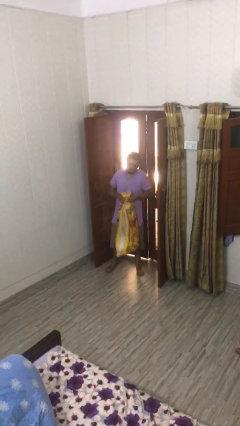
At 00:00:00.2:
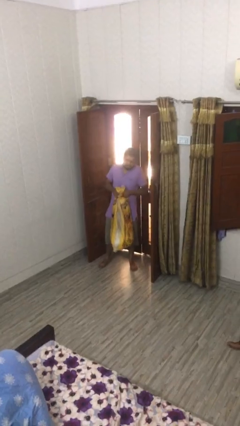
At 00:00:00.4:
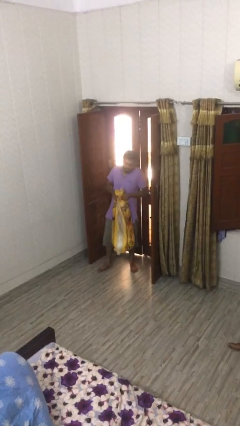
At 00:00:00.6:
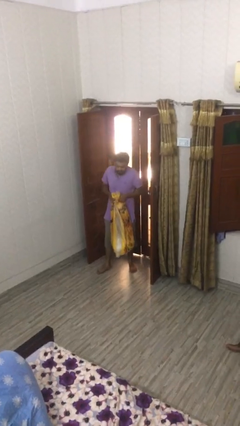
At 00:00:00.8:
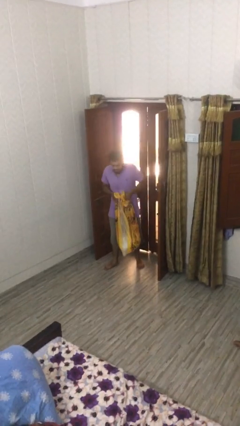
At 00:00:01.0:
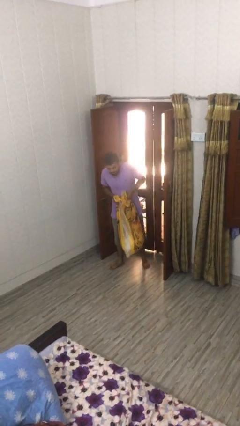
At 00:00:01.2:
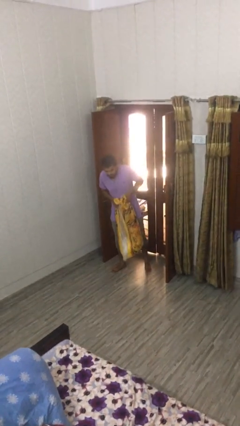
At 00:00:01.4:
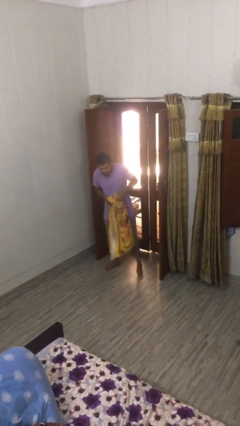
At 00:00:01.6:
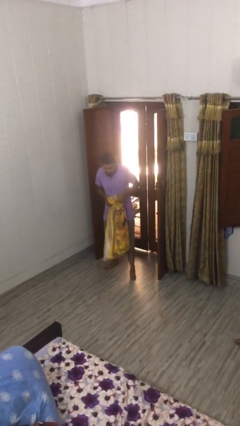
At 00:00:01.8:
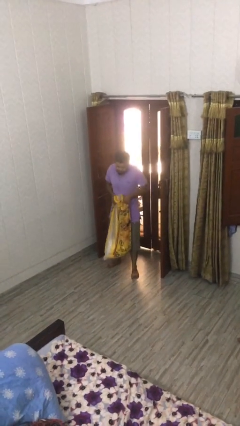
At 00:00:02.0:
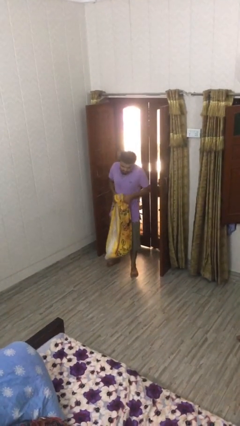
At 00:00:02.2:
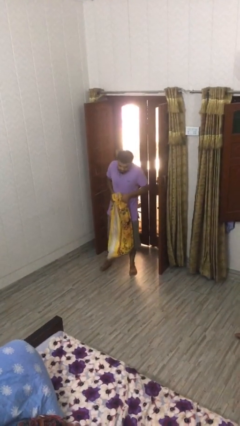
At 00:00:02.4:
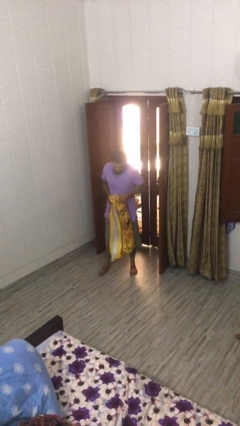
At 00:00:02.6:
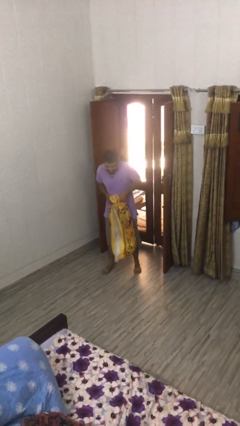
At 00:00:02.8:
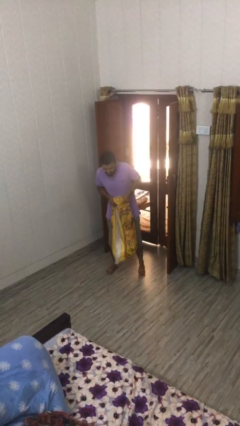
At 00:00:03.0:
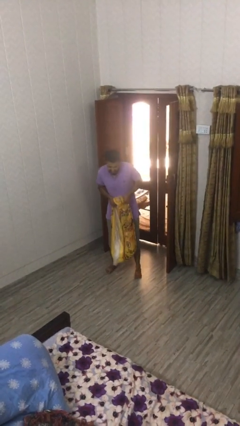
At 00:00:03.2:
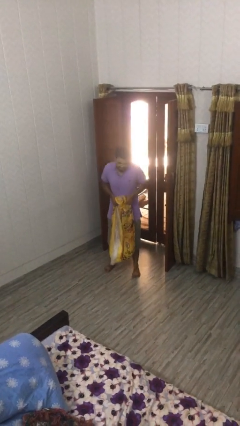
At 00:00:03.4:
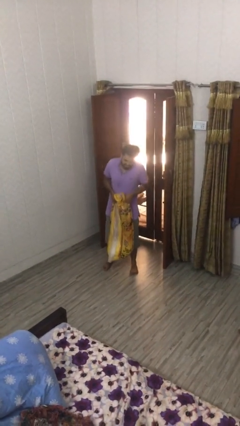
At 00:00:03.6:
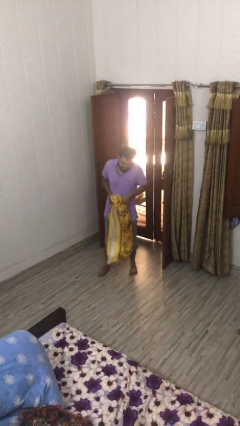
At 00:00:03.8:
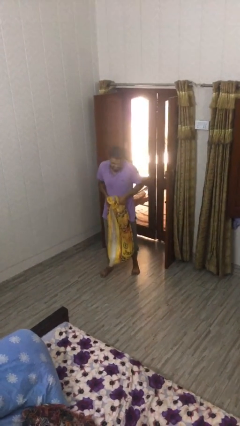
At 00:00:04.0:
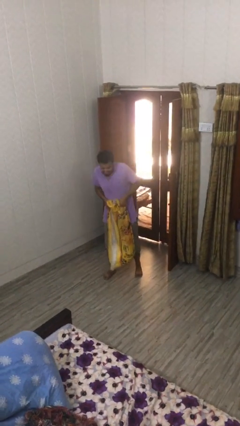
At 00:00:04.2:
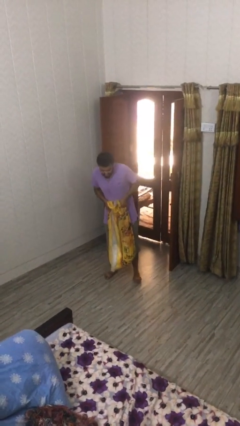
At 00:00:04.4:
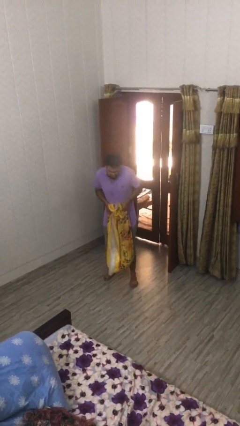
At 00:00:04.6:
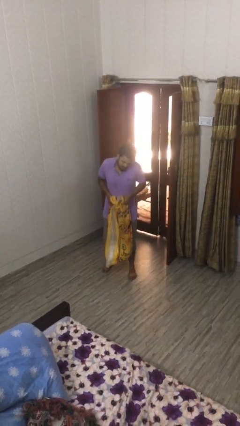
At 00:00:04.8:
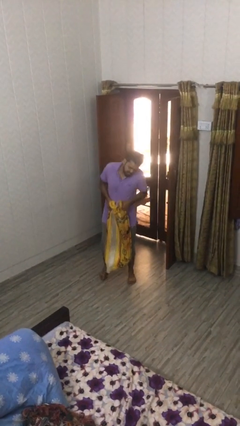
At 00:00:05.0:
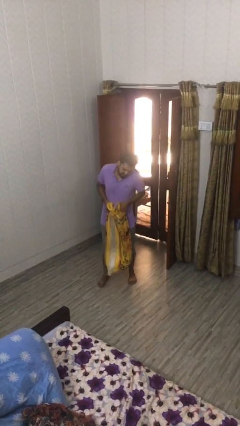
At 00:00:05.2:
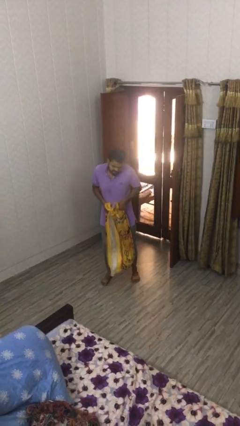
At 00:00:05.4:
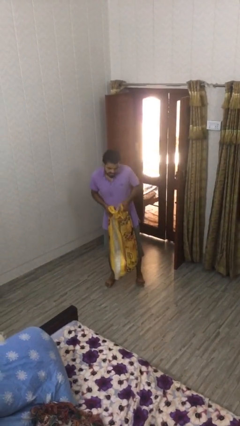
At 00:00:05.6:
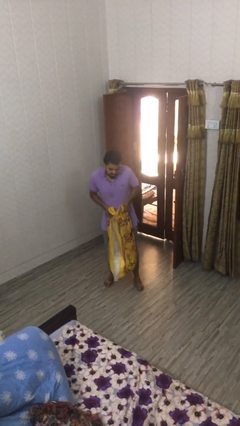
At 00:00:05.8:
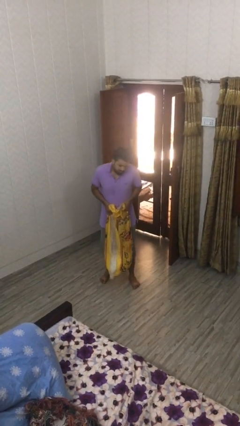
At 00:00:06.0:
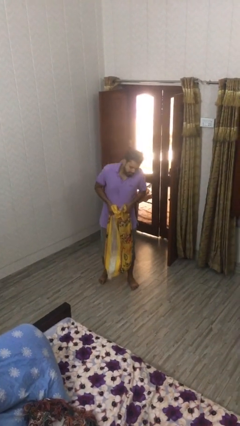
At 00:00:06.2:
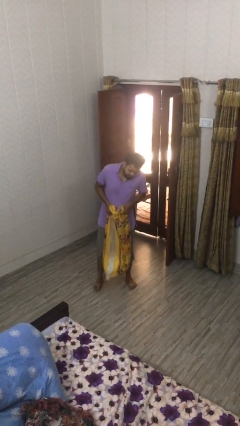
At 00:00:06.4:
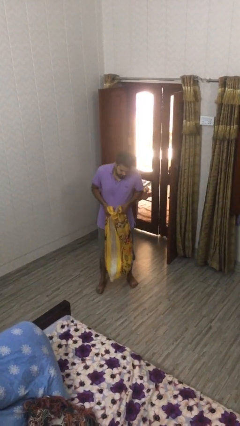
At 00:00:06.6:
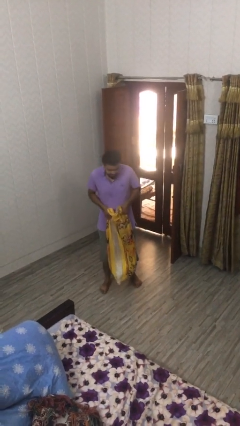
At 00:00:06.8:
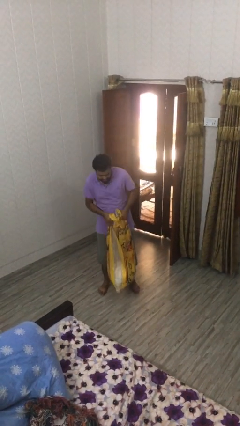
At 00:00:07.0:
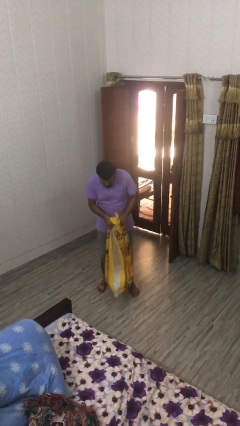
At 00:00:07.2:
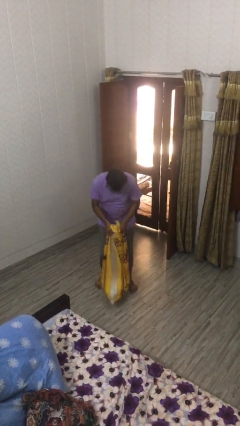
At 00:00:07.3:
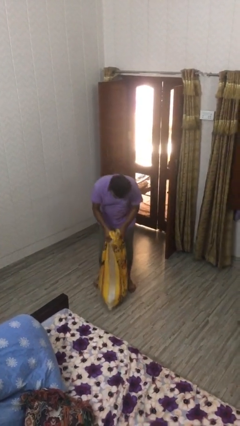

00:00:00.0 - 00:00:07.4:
person carries heavy object

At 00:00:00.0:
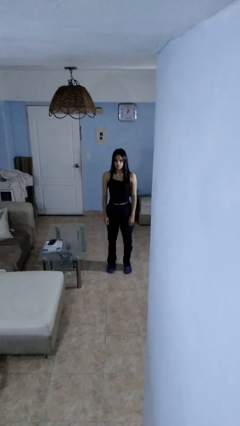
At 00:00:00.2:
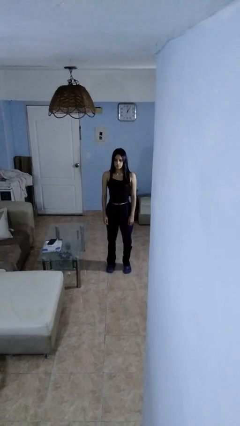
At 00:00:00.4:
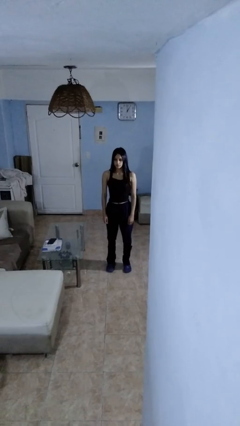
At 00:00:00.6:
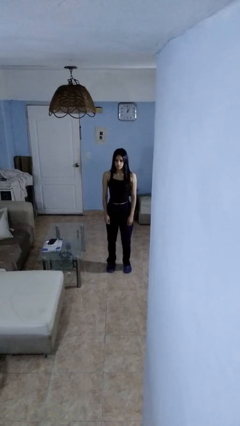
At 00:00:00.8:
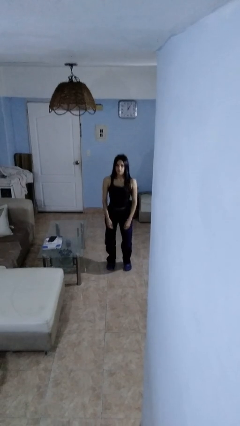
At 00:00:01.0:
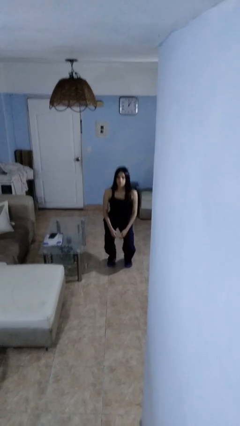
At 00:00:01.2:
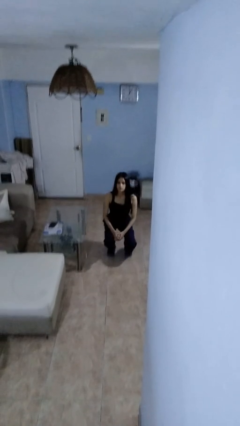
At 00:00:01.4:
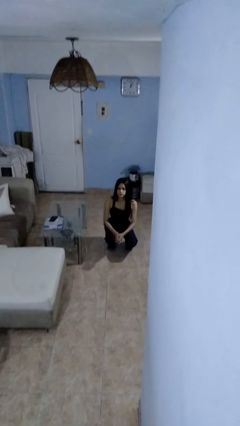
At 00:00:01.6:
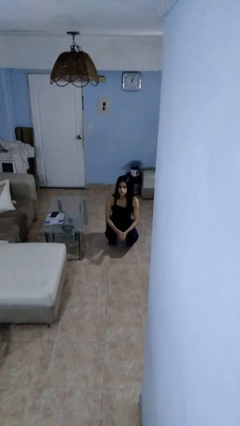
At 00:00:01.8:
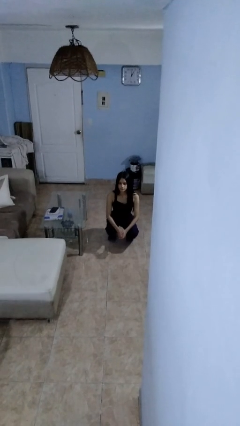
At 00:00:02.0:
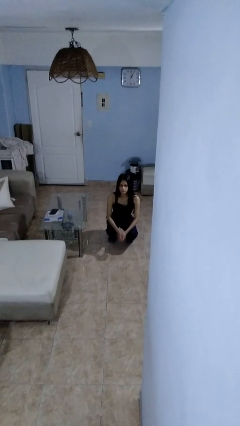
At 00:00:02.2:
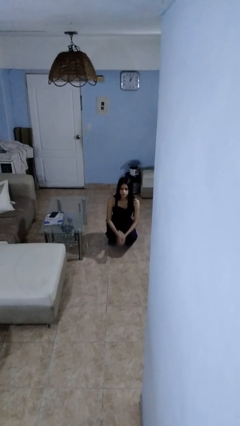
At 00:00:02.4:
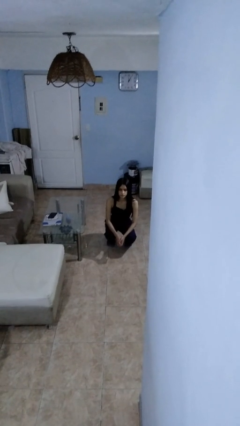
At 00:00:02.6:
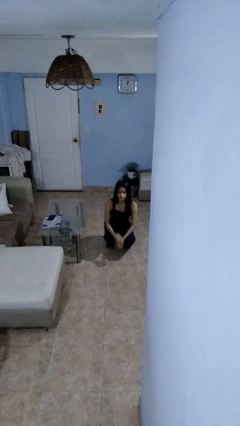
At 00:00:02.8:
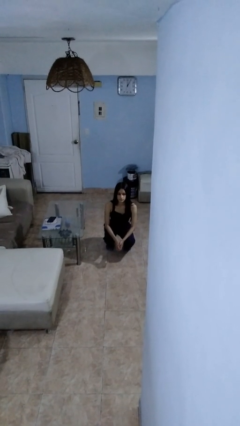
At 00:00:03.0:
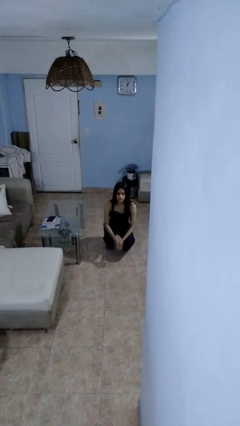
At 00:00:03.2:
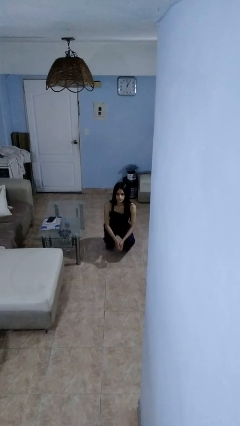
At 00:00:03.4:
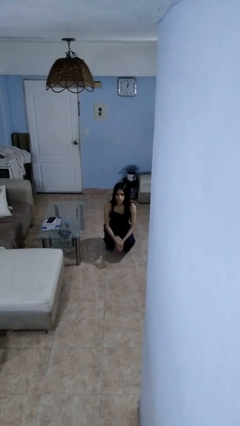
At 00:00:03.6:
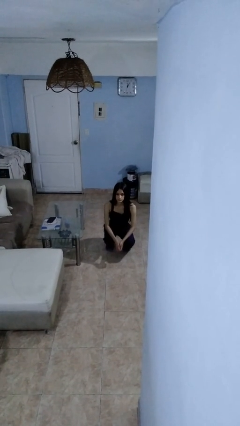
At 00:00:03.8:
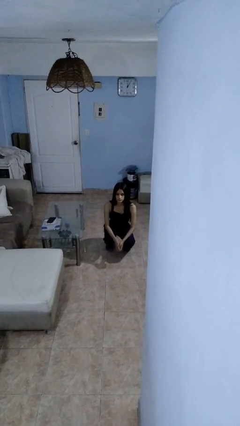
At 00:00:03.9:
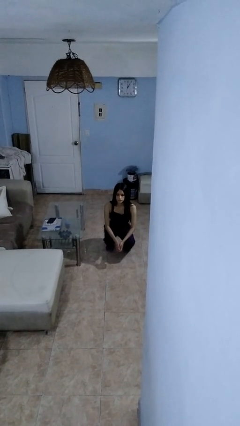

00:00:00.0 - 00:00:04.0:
person squats

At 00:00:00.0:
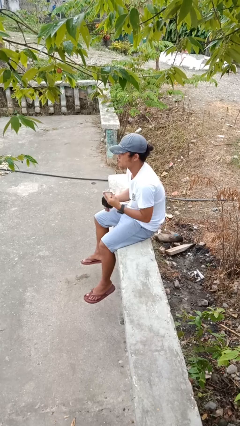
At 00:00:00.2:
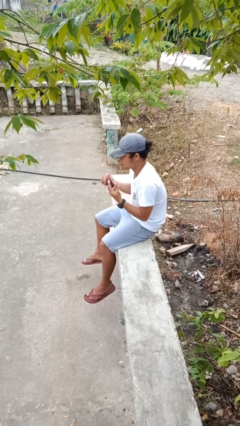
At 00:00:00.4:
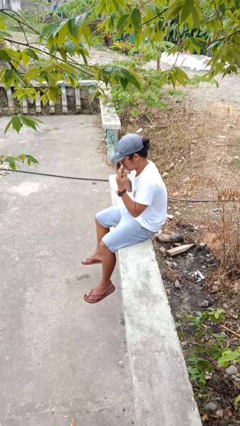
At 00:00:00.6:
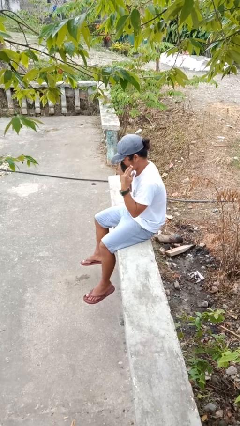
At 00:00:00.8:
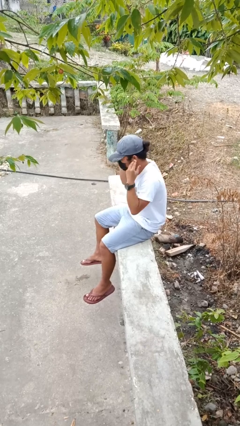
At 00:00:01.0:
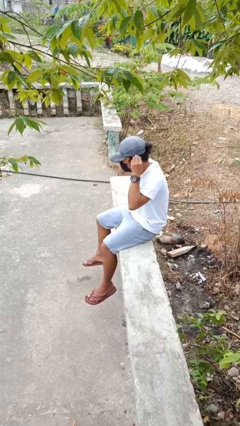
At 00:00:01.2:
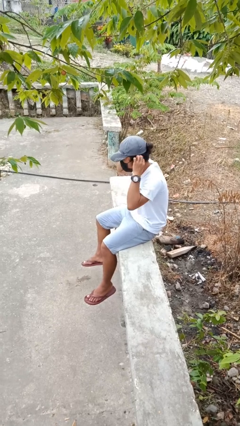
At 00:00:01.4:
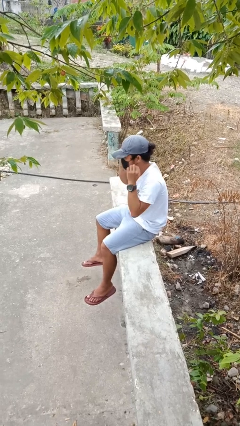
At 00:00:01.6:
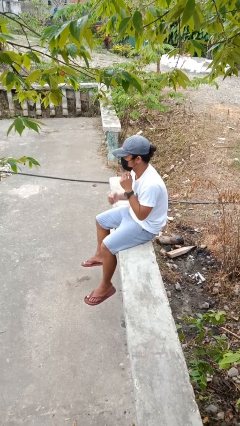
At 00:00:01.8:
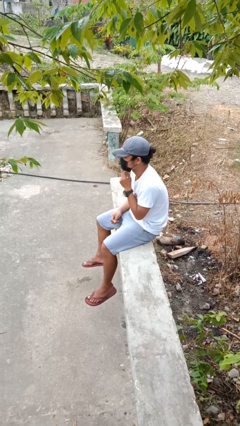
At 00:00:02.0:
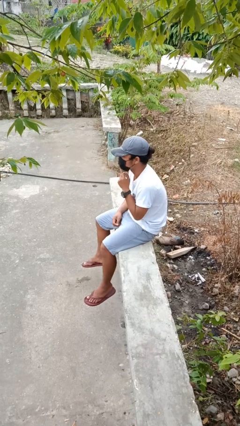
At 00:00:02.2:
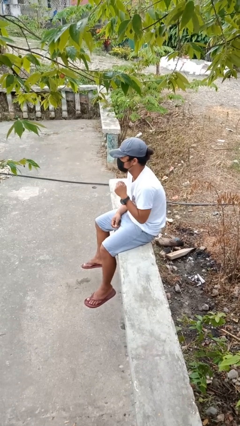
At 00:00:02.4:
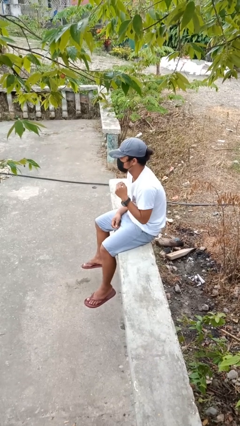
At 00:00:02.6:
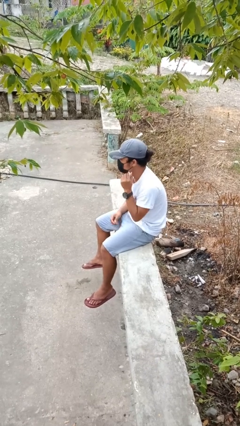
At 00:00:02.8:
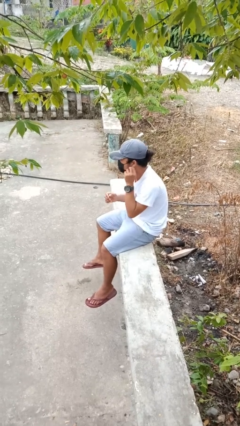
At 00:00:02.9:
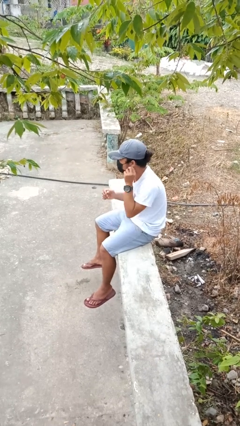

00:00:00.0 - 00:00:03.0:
person puts on facemask

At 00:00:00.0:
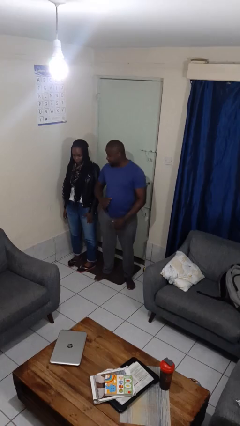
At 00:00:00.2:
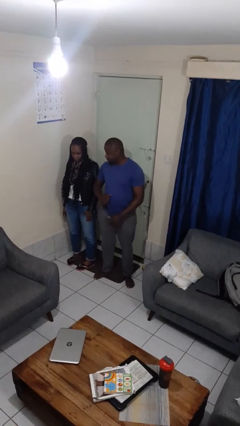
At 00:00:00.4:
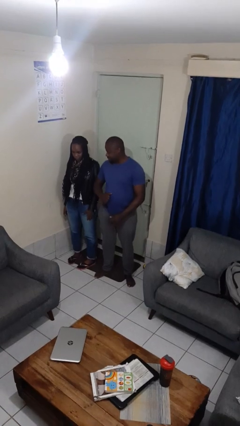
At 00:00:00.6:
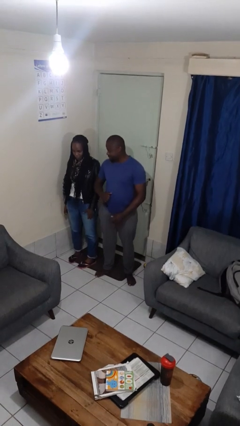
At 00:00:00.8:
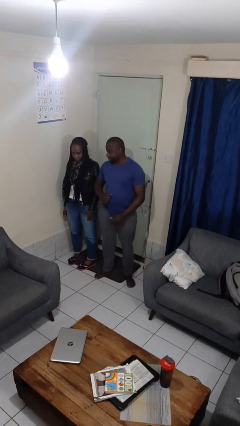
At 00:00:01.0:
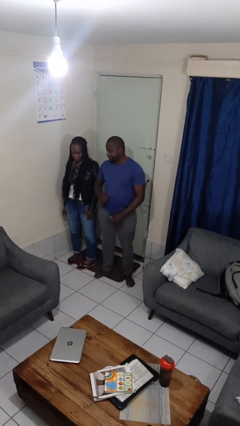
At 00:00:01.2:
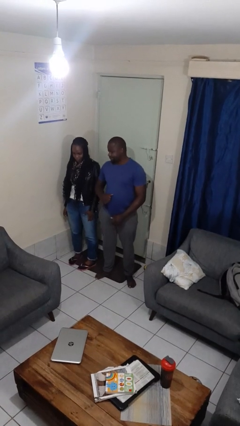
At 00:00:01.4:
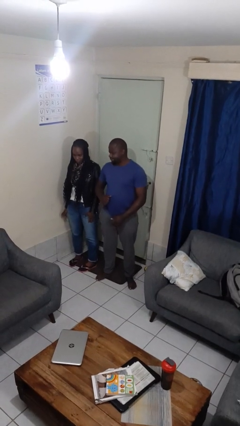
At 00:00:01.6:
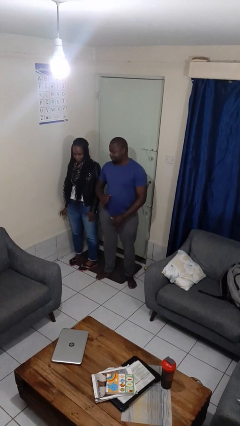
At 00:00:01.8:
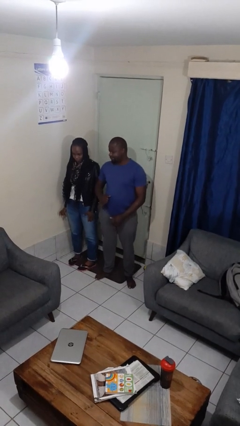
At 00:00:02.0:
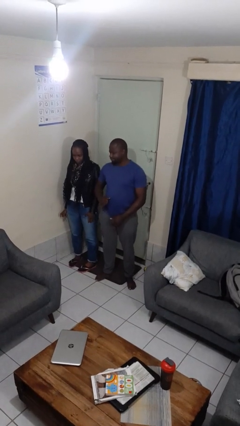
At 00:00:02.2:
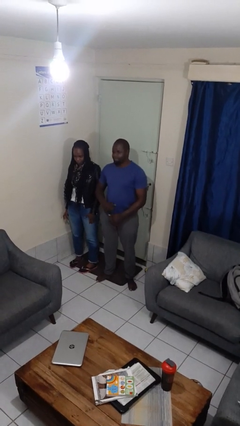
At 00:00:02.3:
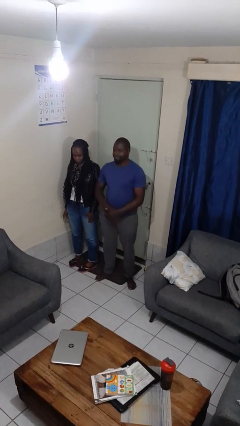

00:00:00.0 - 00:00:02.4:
person nudges person with elbow

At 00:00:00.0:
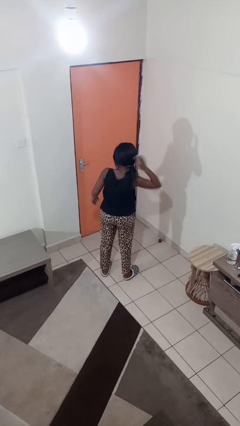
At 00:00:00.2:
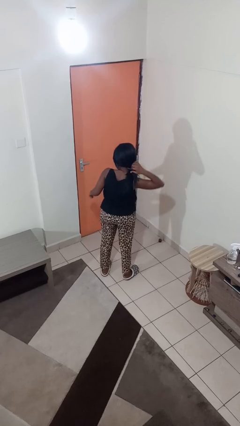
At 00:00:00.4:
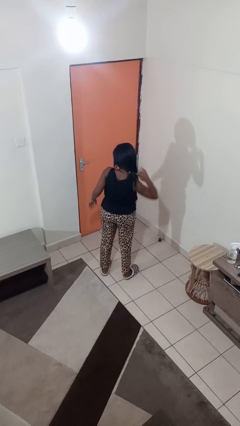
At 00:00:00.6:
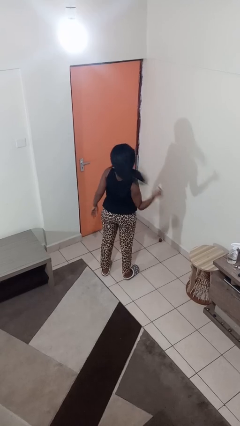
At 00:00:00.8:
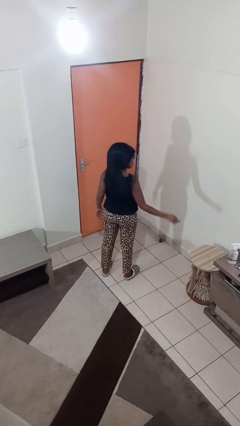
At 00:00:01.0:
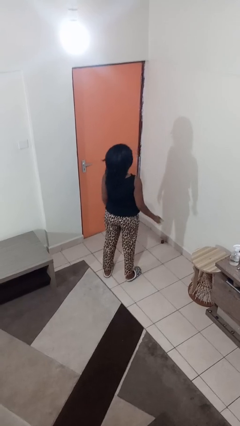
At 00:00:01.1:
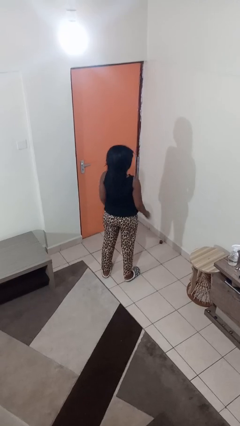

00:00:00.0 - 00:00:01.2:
person takes off hairtie
